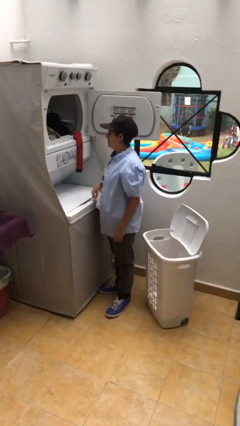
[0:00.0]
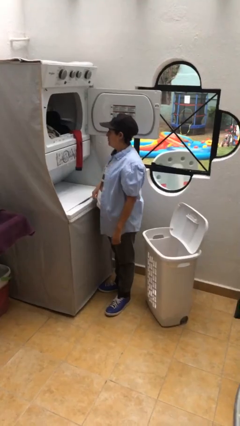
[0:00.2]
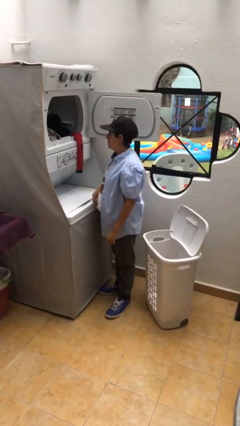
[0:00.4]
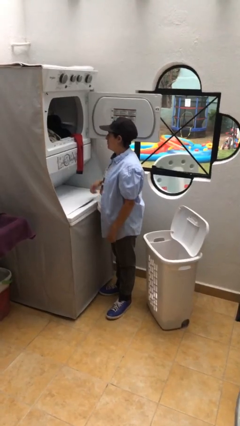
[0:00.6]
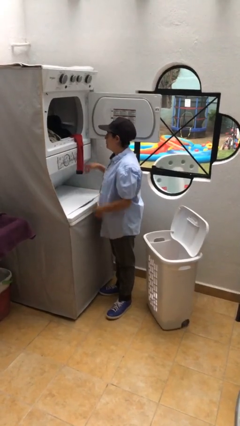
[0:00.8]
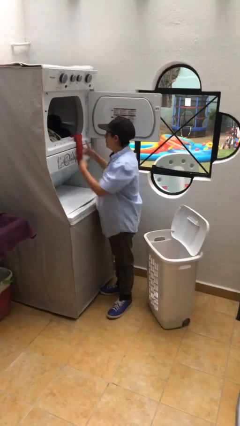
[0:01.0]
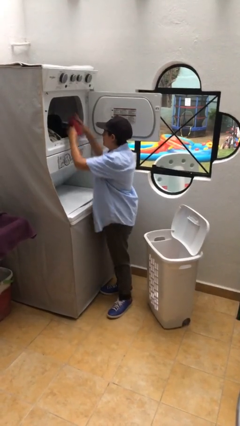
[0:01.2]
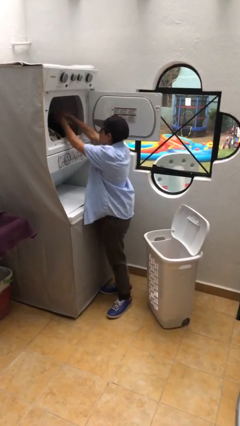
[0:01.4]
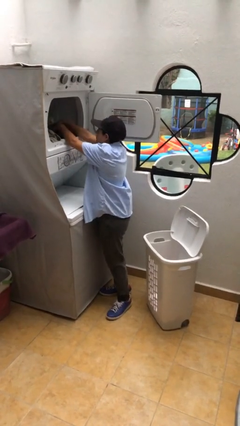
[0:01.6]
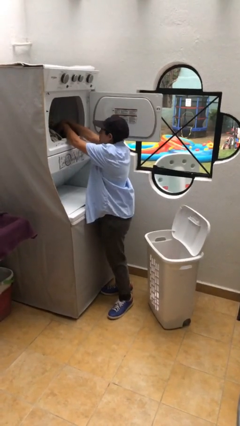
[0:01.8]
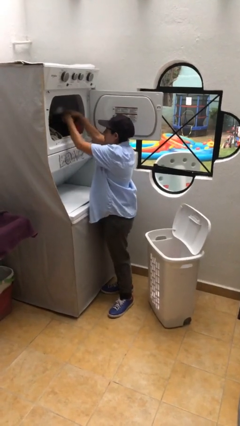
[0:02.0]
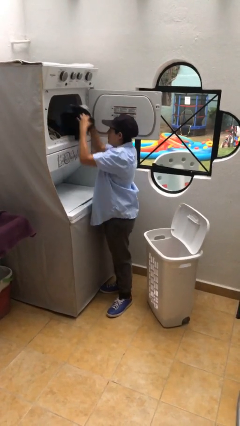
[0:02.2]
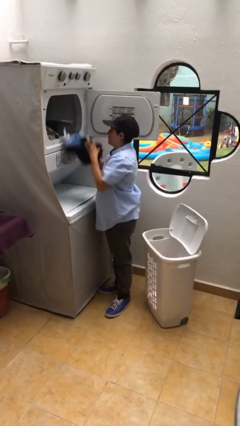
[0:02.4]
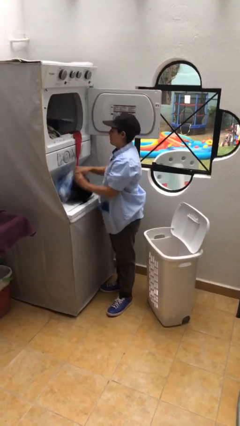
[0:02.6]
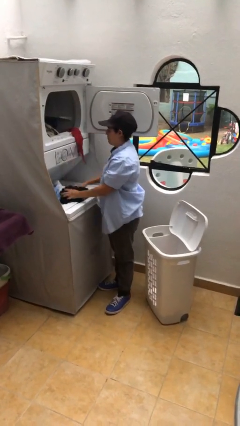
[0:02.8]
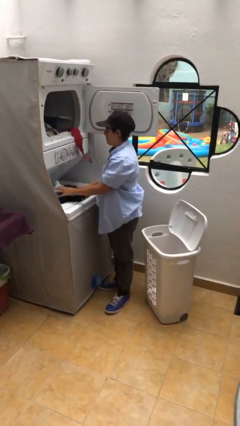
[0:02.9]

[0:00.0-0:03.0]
person unloads dryer

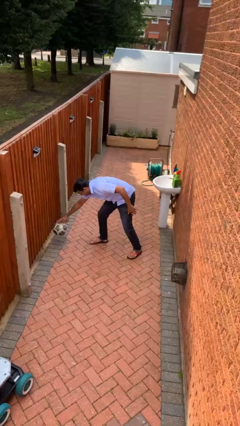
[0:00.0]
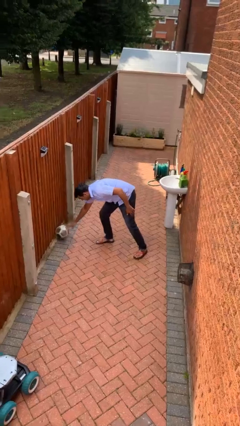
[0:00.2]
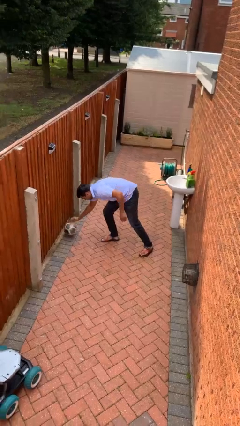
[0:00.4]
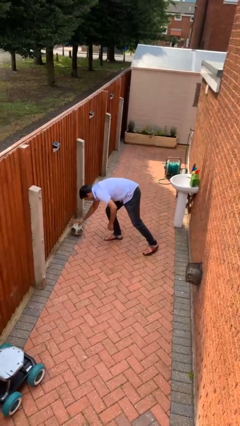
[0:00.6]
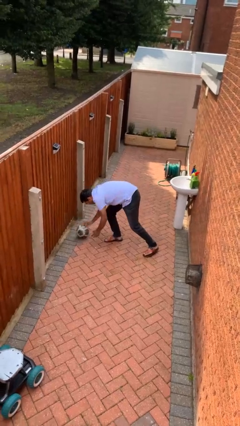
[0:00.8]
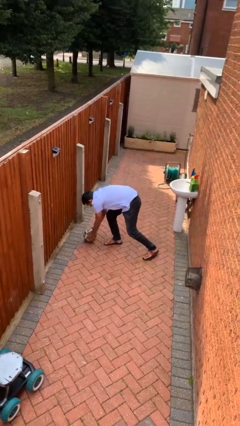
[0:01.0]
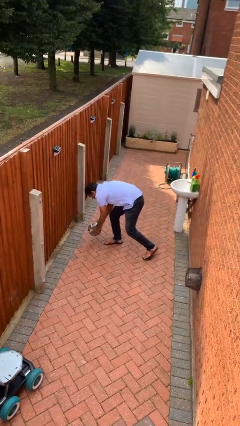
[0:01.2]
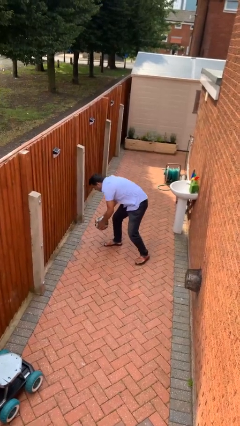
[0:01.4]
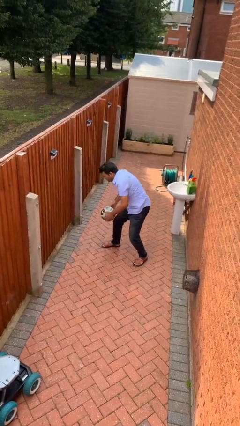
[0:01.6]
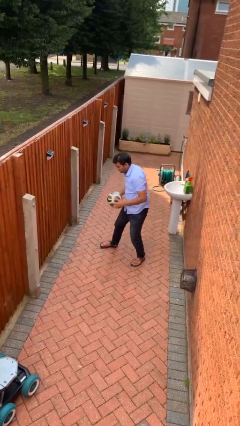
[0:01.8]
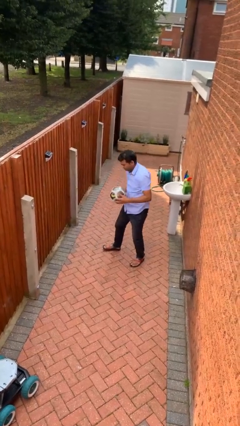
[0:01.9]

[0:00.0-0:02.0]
person picks up object from floor

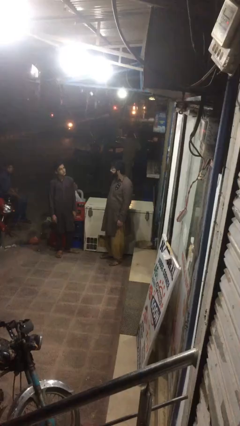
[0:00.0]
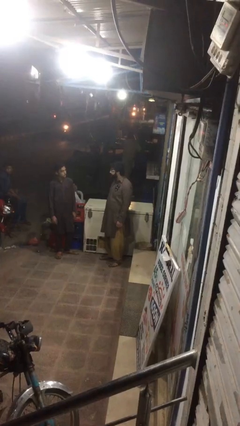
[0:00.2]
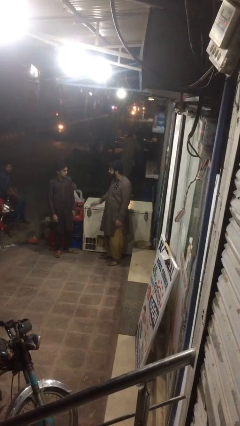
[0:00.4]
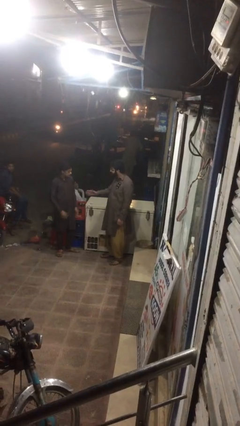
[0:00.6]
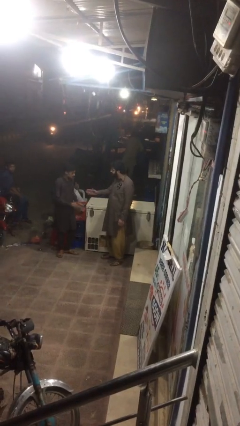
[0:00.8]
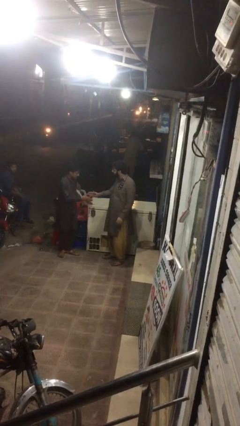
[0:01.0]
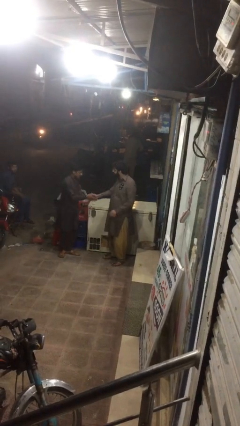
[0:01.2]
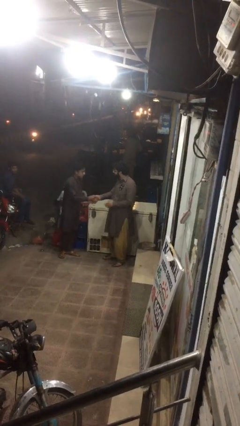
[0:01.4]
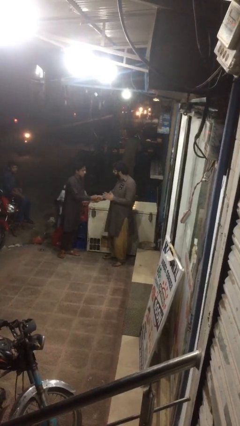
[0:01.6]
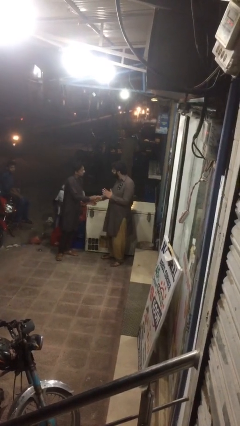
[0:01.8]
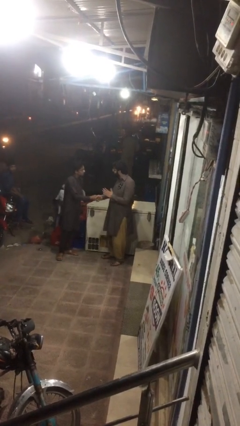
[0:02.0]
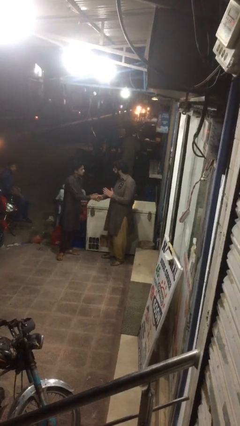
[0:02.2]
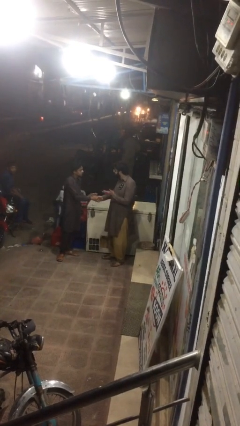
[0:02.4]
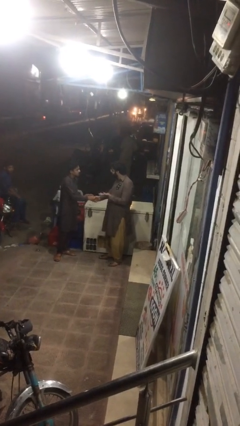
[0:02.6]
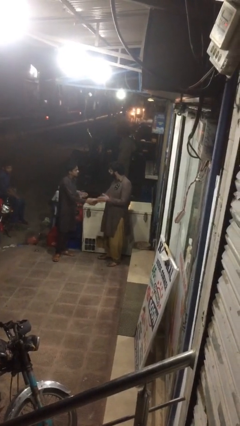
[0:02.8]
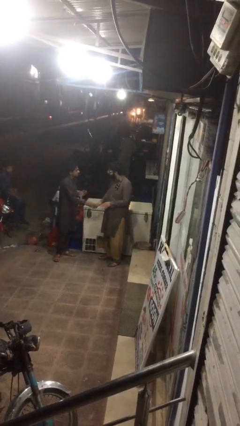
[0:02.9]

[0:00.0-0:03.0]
person shakes hand

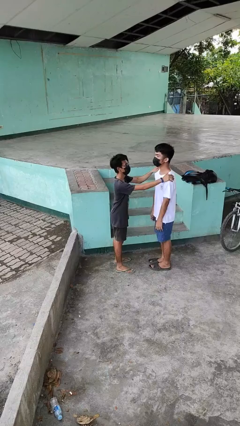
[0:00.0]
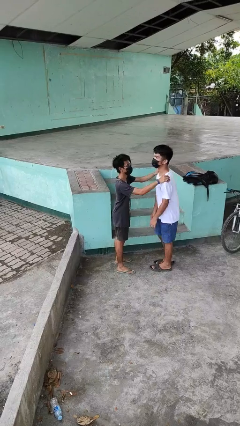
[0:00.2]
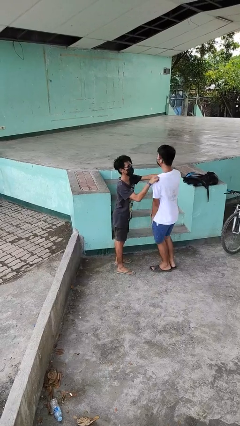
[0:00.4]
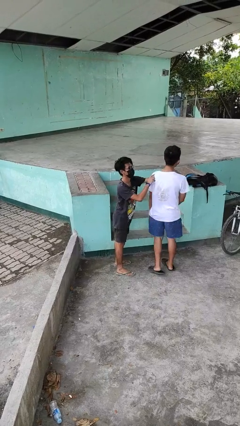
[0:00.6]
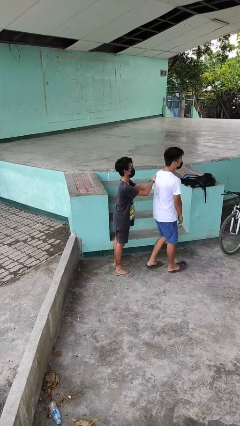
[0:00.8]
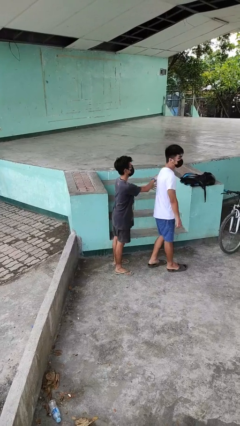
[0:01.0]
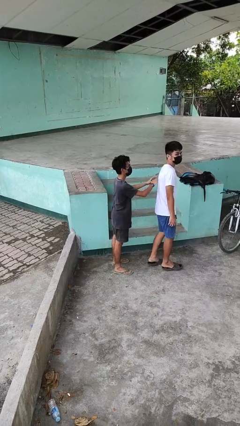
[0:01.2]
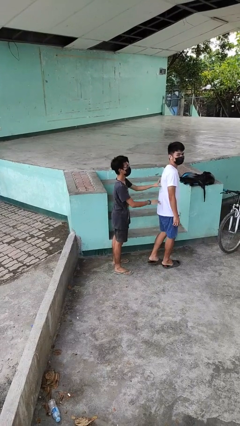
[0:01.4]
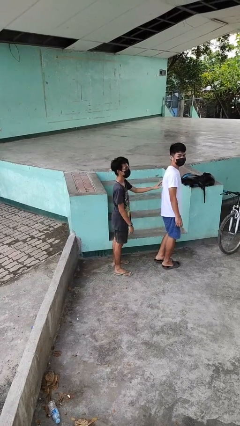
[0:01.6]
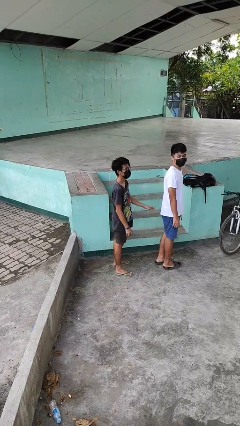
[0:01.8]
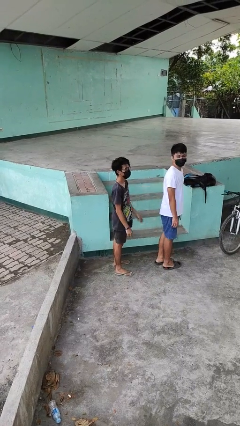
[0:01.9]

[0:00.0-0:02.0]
person spins person around

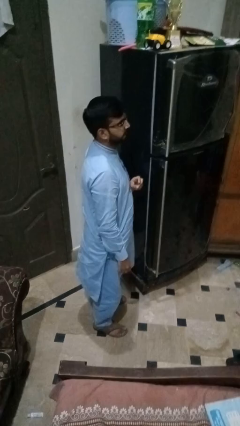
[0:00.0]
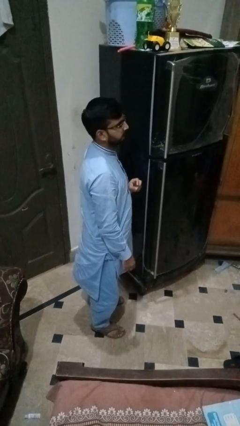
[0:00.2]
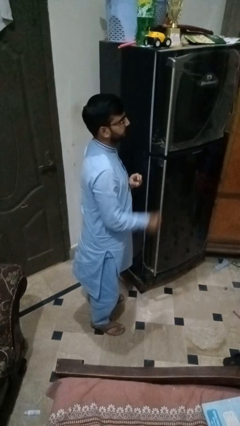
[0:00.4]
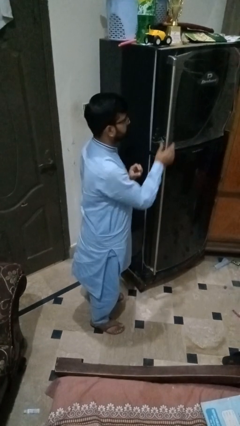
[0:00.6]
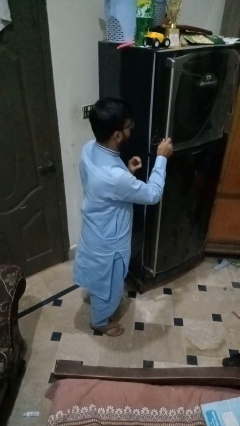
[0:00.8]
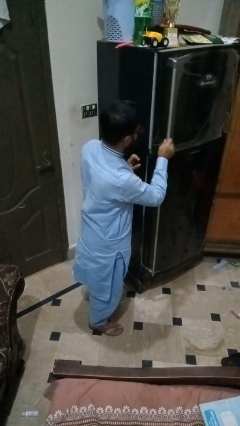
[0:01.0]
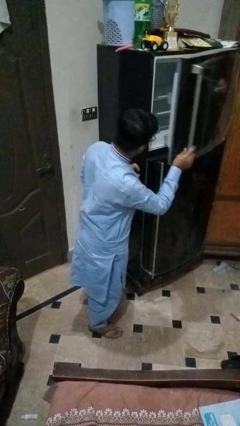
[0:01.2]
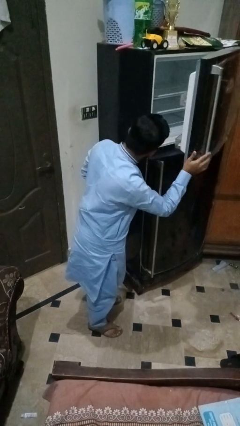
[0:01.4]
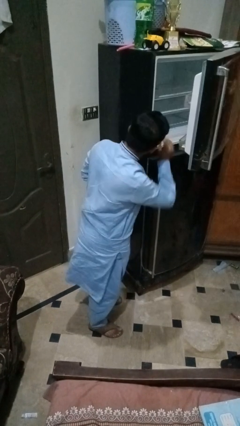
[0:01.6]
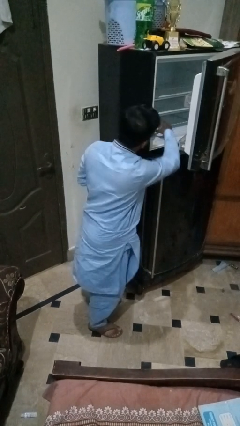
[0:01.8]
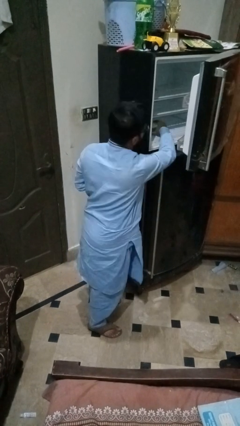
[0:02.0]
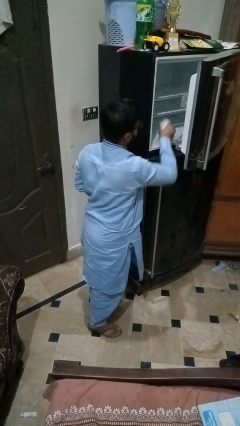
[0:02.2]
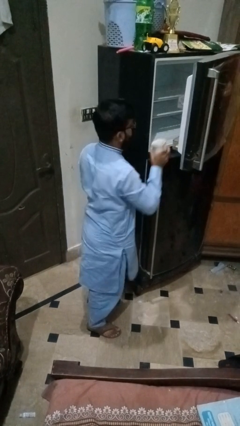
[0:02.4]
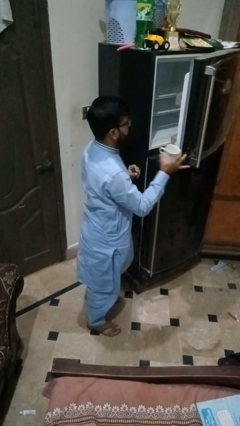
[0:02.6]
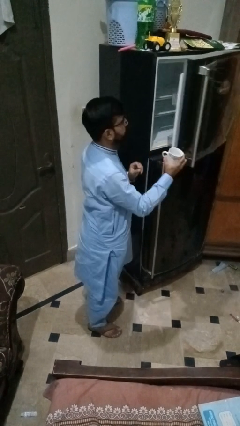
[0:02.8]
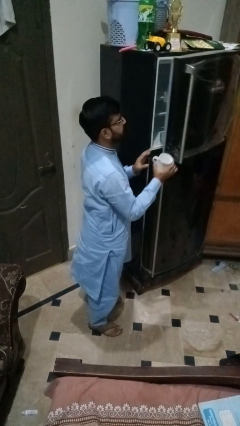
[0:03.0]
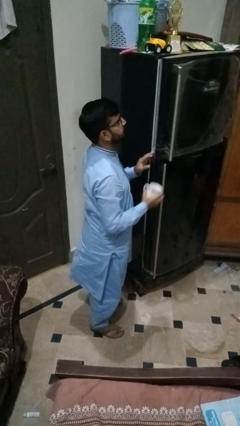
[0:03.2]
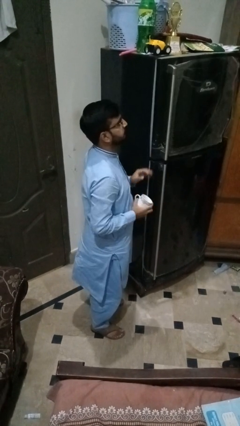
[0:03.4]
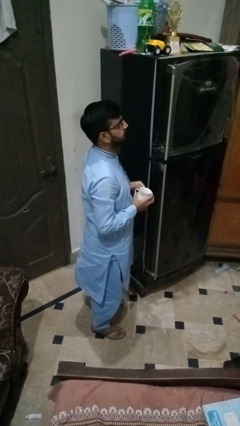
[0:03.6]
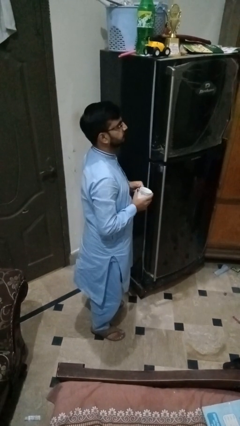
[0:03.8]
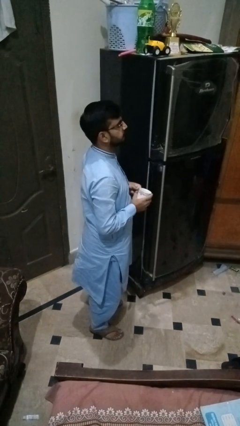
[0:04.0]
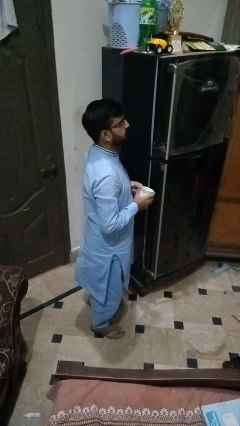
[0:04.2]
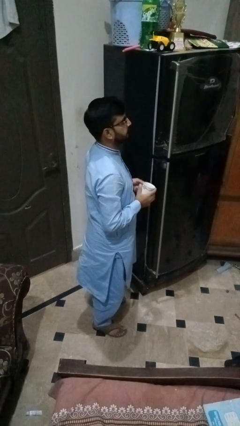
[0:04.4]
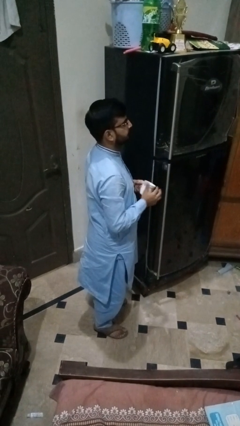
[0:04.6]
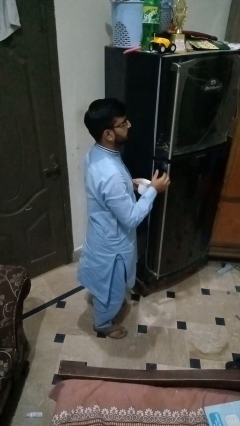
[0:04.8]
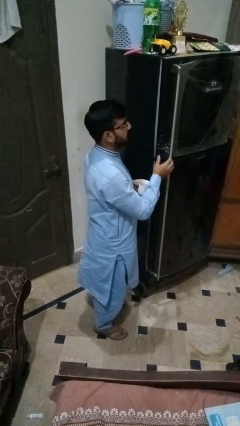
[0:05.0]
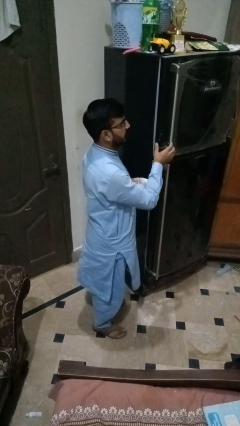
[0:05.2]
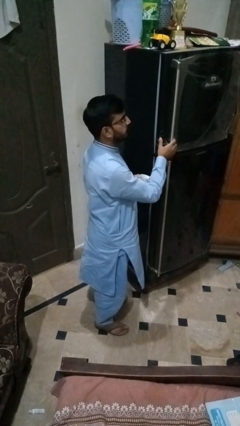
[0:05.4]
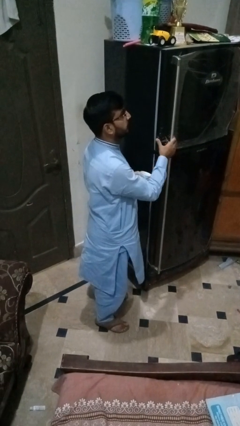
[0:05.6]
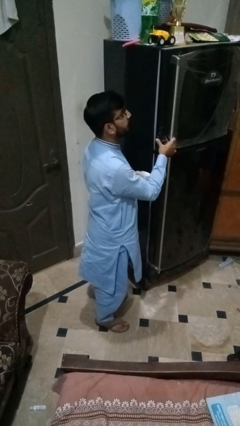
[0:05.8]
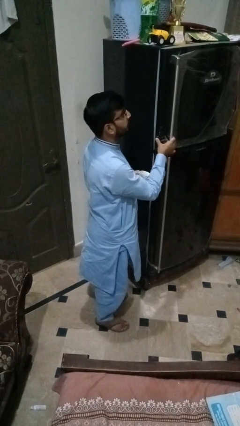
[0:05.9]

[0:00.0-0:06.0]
person takes object from refrigerator

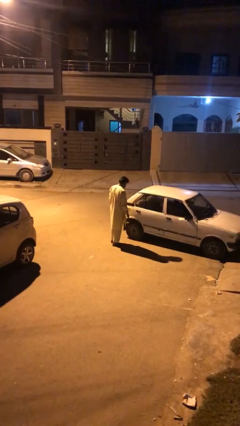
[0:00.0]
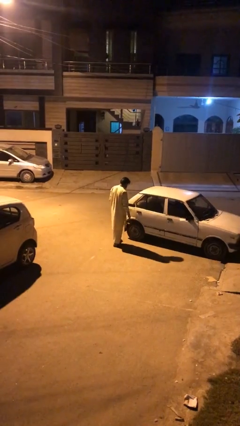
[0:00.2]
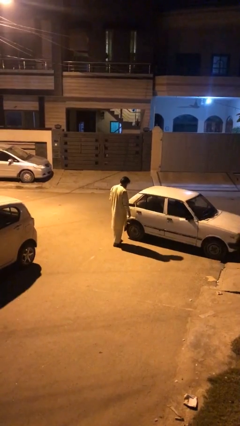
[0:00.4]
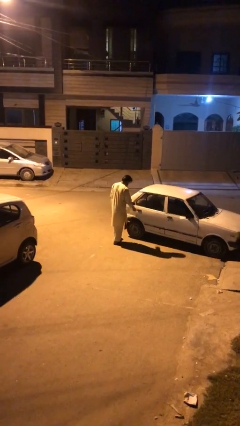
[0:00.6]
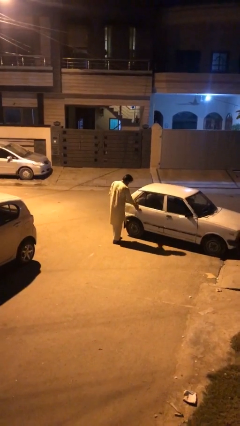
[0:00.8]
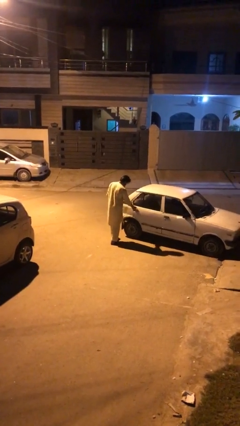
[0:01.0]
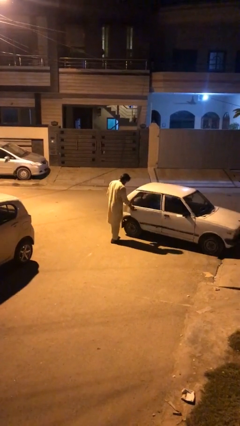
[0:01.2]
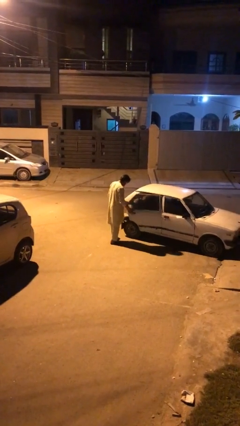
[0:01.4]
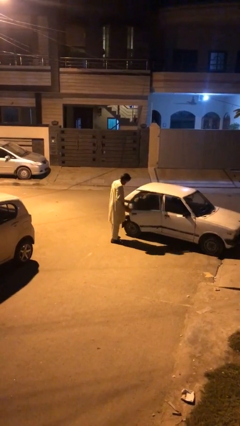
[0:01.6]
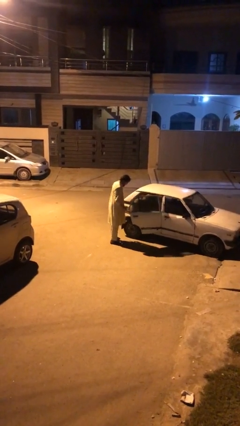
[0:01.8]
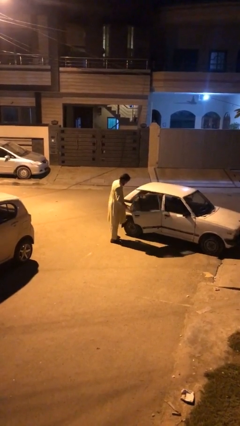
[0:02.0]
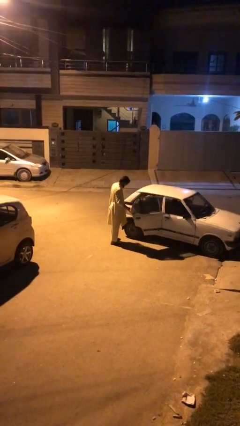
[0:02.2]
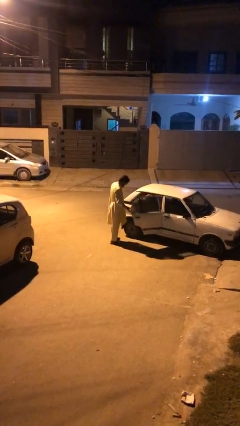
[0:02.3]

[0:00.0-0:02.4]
person opens car door
